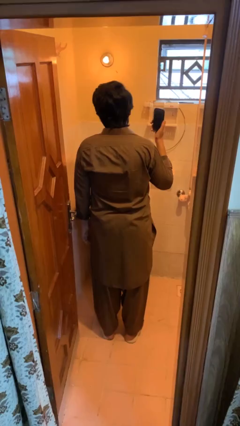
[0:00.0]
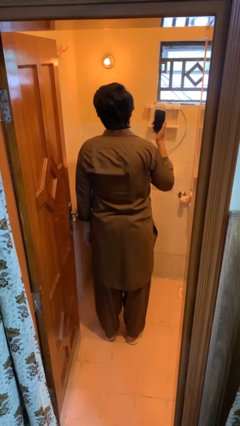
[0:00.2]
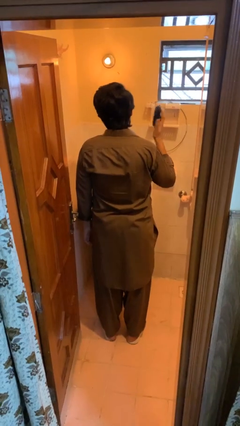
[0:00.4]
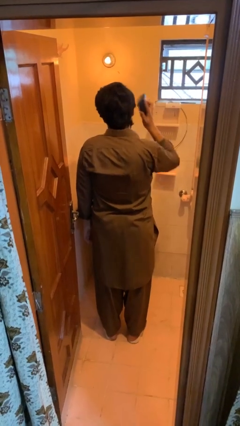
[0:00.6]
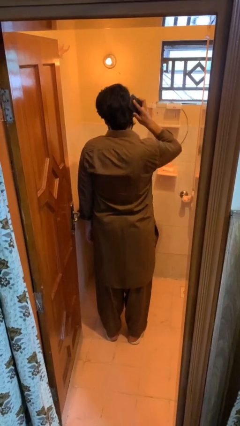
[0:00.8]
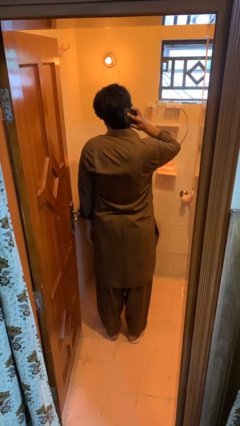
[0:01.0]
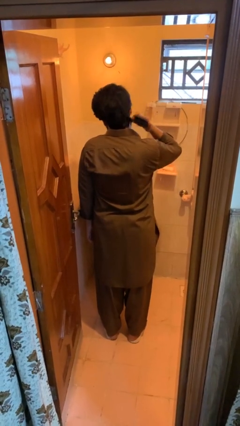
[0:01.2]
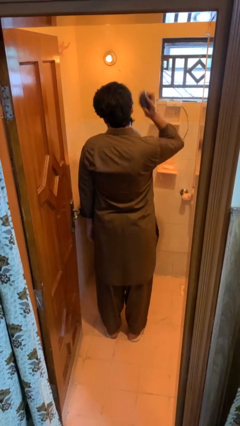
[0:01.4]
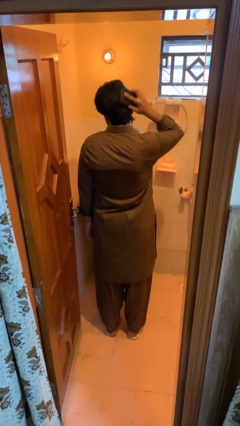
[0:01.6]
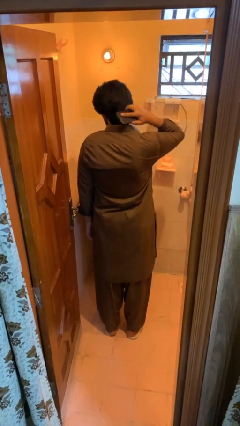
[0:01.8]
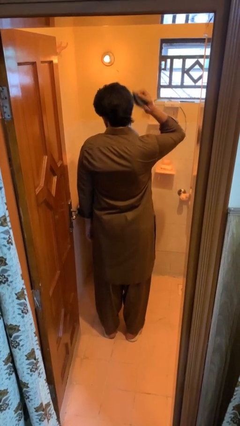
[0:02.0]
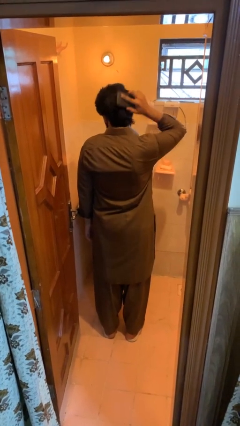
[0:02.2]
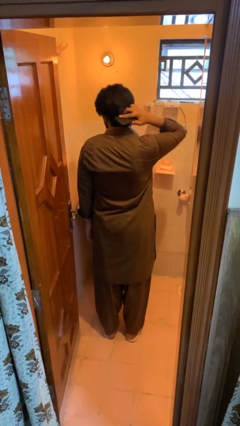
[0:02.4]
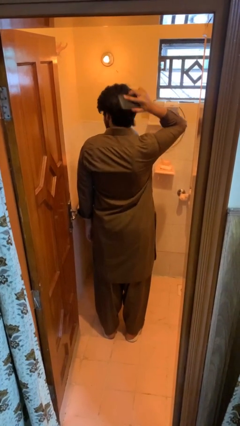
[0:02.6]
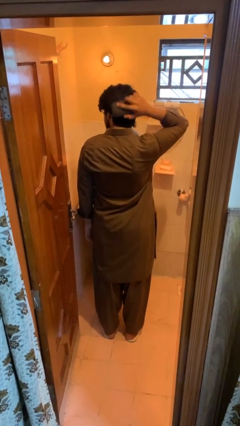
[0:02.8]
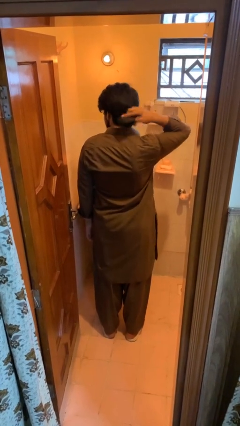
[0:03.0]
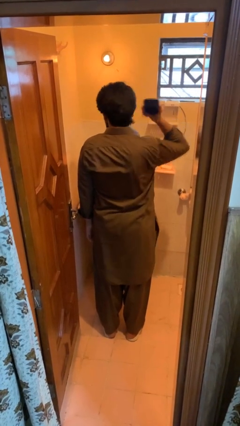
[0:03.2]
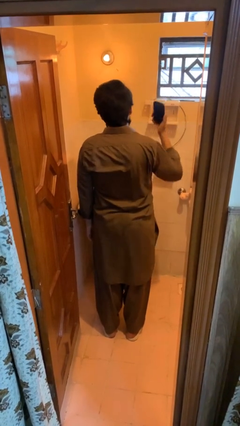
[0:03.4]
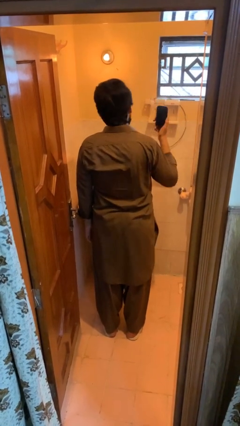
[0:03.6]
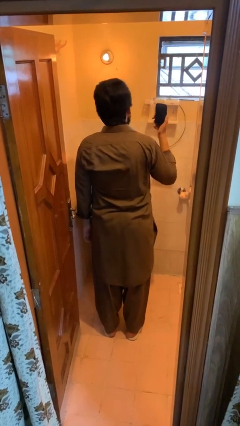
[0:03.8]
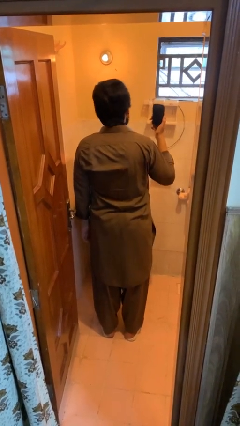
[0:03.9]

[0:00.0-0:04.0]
person brushes hair

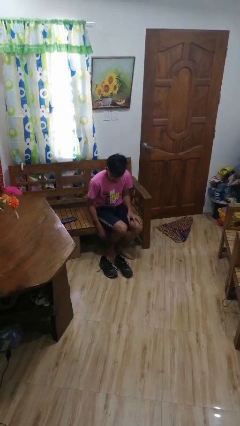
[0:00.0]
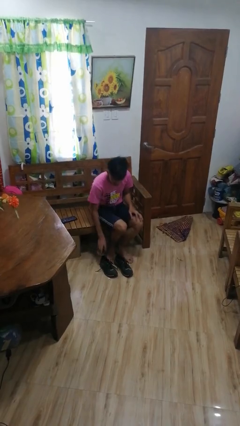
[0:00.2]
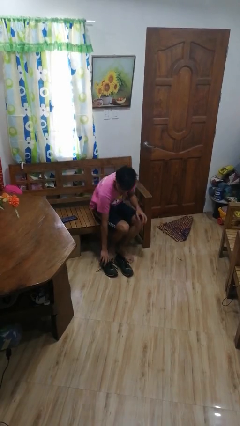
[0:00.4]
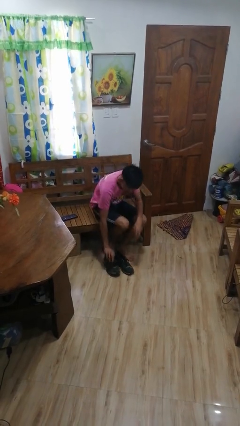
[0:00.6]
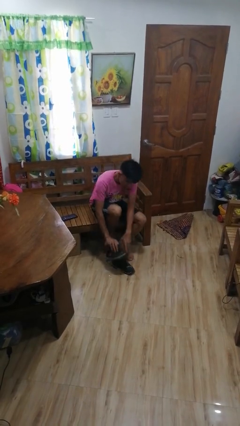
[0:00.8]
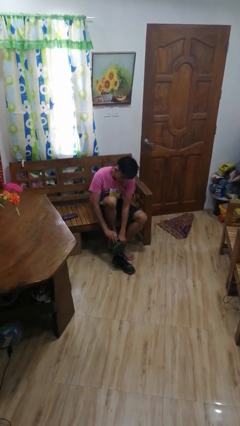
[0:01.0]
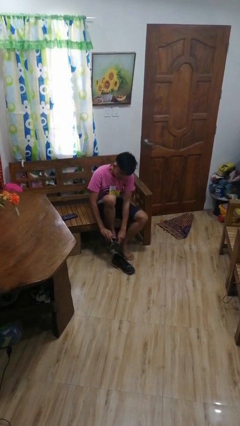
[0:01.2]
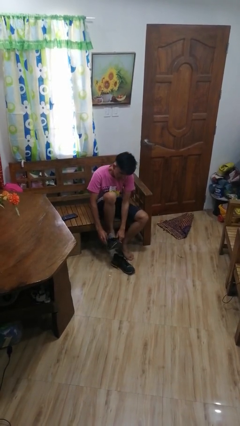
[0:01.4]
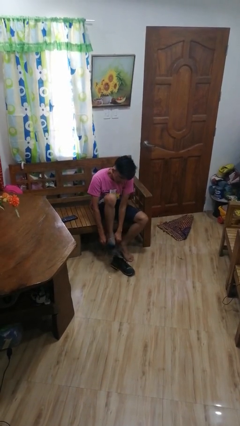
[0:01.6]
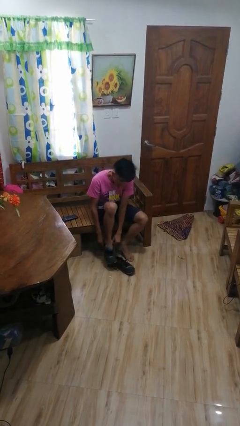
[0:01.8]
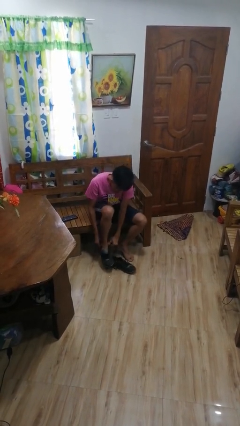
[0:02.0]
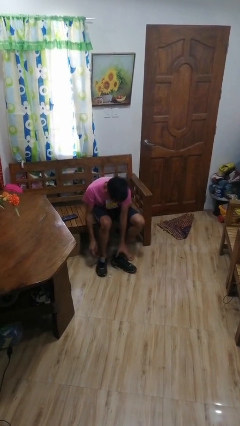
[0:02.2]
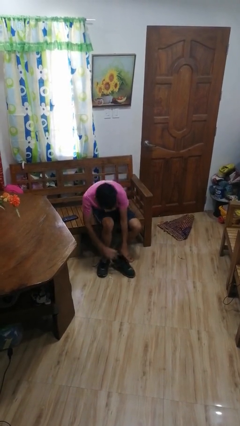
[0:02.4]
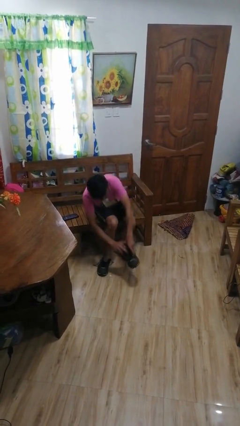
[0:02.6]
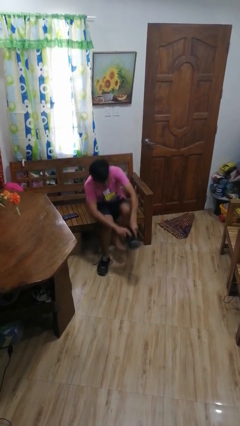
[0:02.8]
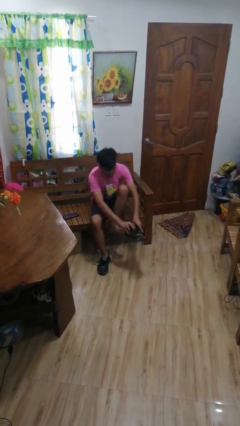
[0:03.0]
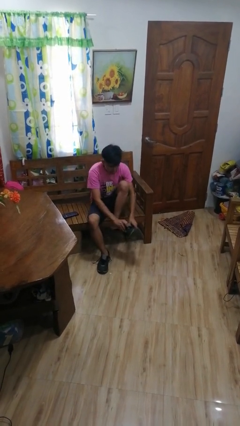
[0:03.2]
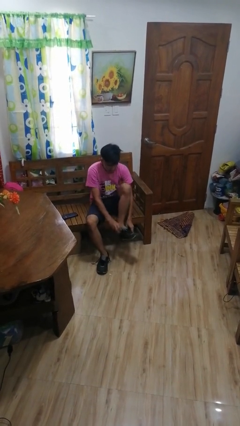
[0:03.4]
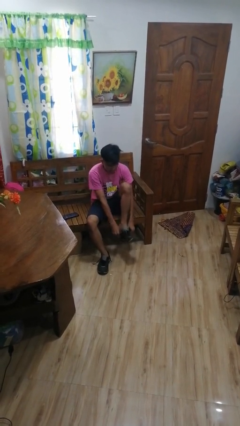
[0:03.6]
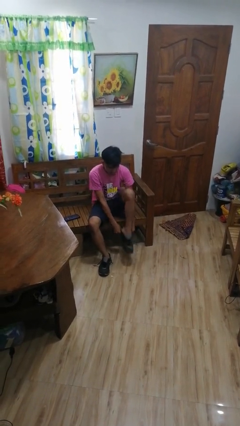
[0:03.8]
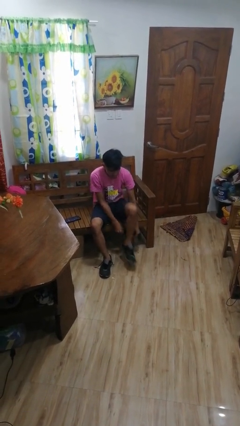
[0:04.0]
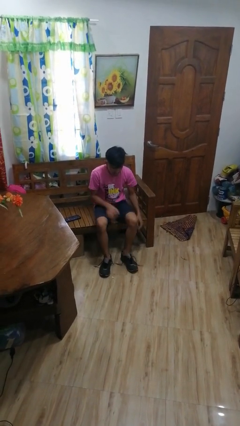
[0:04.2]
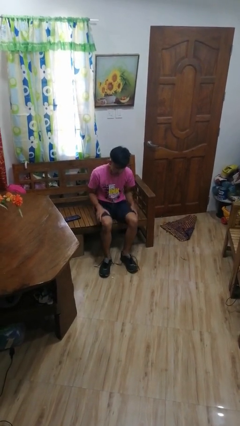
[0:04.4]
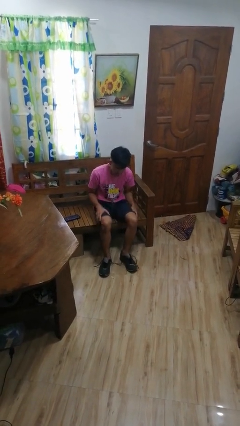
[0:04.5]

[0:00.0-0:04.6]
person puts on shoes

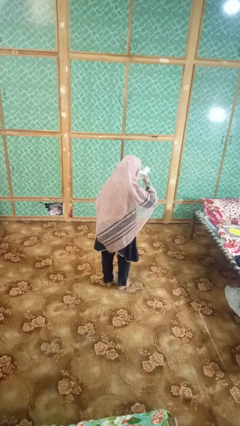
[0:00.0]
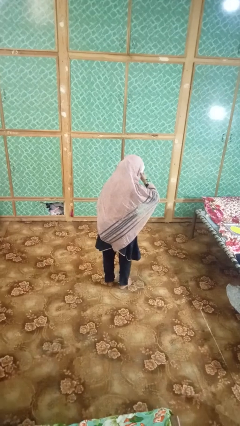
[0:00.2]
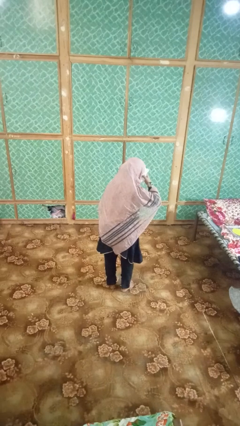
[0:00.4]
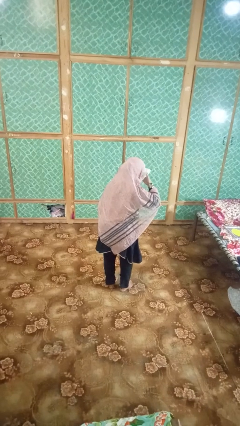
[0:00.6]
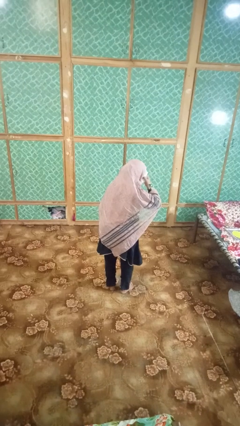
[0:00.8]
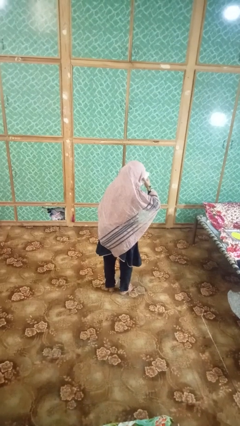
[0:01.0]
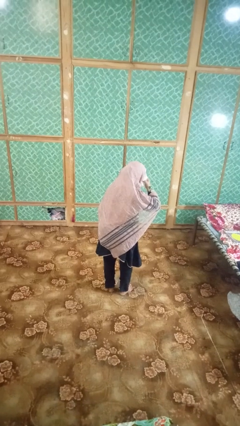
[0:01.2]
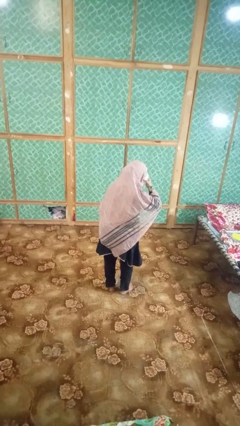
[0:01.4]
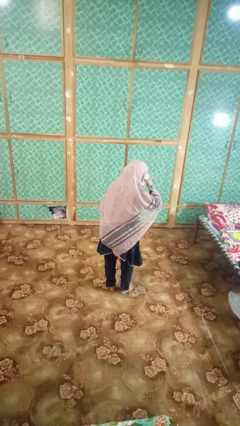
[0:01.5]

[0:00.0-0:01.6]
person blows nose

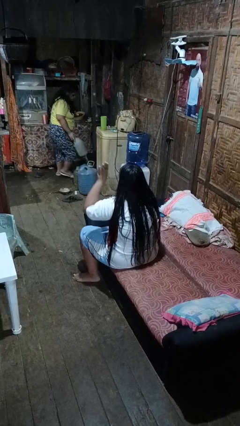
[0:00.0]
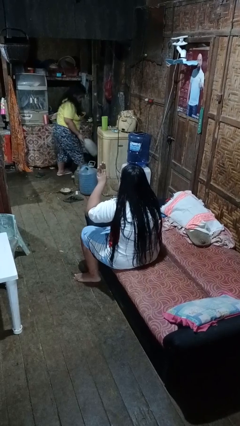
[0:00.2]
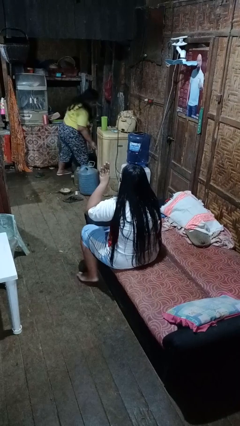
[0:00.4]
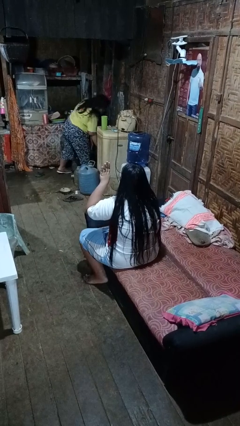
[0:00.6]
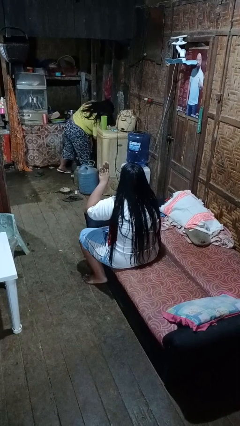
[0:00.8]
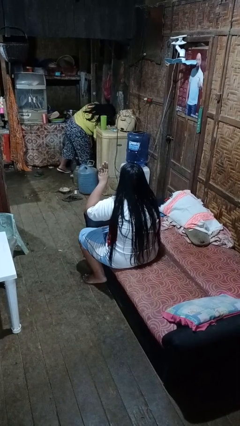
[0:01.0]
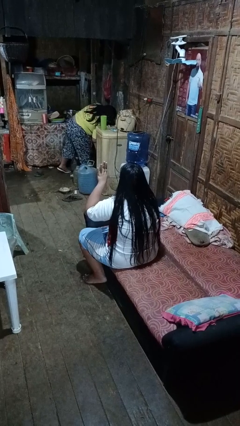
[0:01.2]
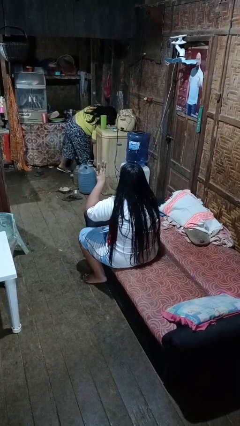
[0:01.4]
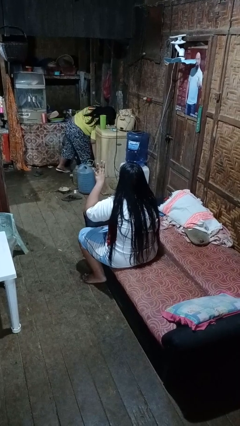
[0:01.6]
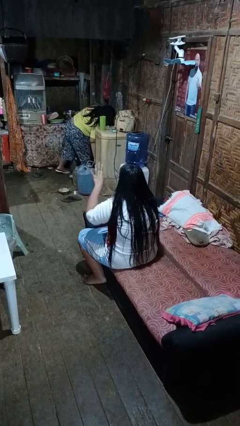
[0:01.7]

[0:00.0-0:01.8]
person gestures number four

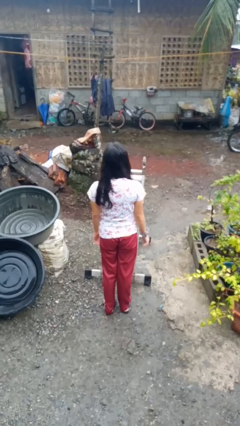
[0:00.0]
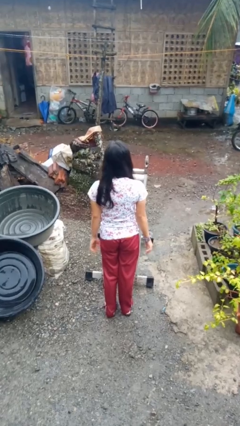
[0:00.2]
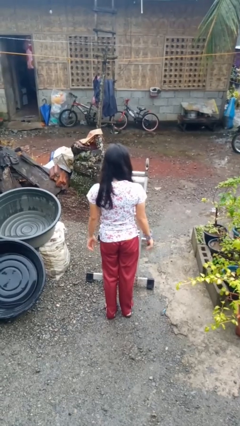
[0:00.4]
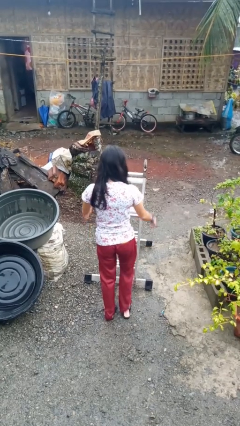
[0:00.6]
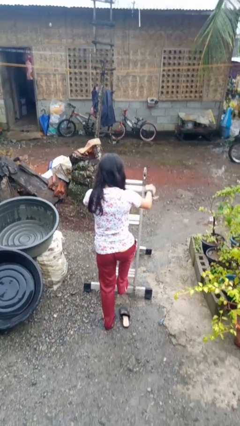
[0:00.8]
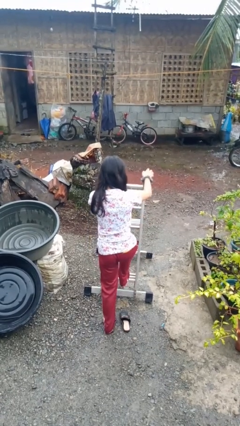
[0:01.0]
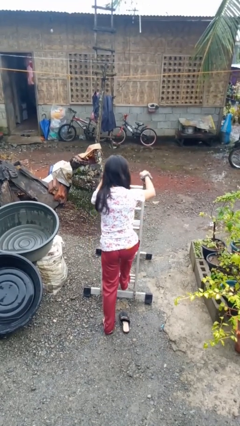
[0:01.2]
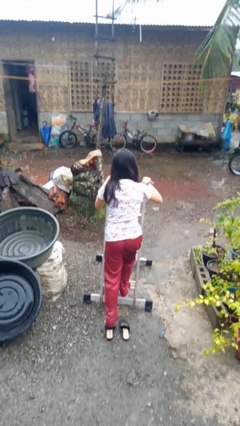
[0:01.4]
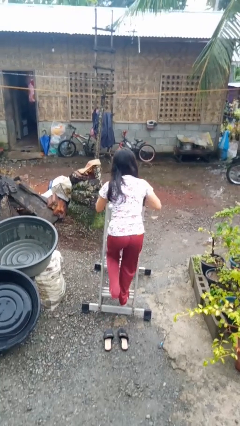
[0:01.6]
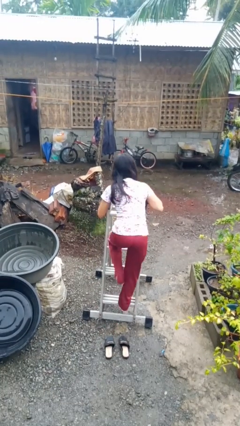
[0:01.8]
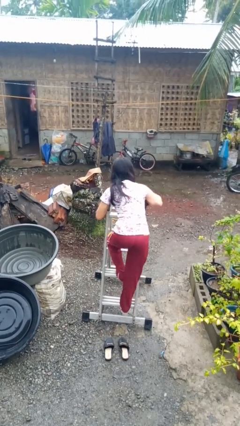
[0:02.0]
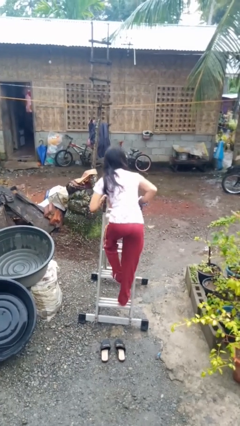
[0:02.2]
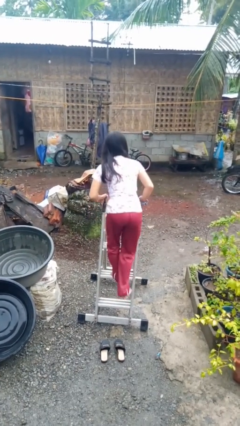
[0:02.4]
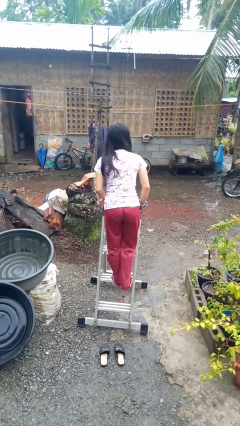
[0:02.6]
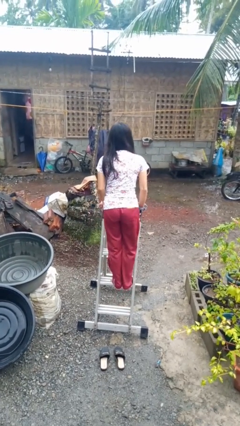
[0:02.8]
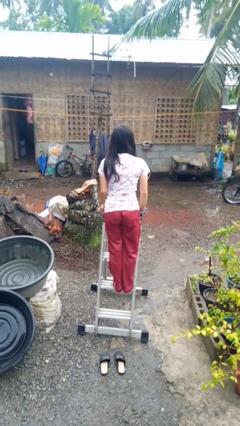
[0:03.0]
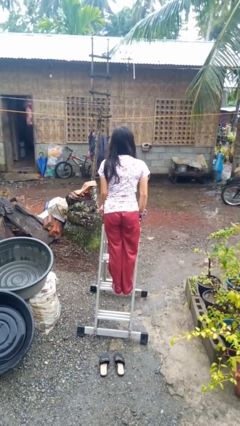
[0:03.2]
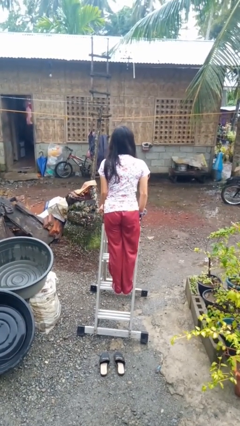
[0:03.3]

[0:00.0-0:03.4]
person climbs up ladder

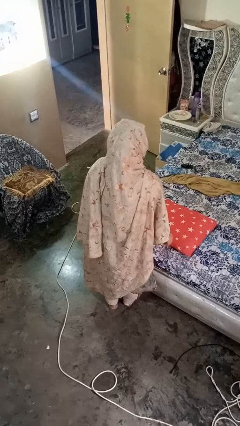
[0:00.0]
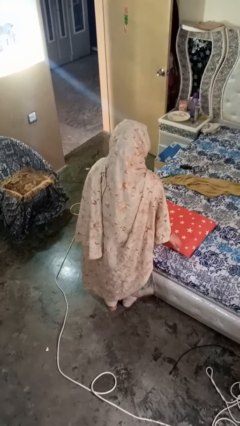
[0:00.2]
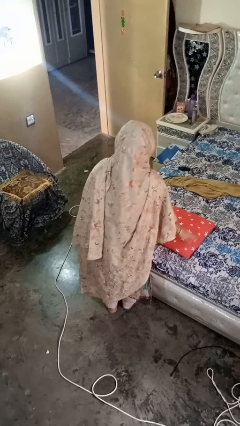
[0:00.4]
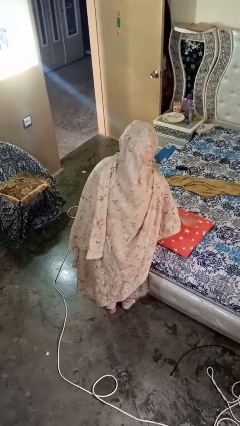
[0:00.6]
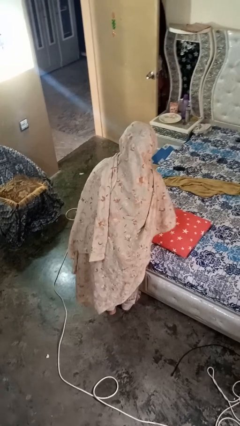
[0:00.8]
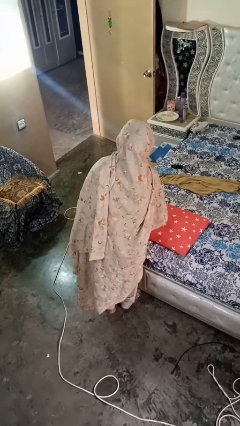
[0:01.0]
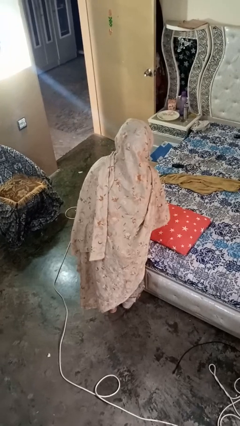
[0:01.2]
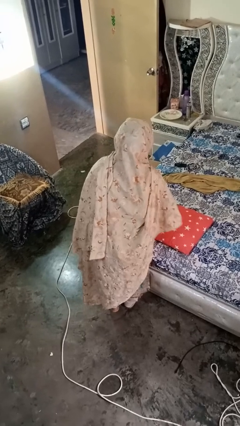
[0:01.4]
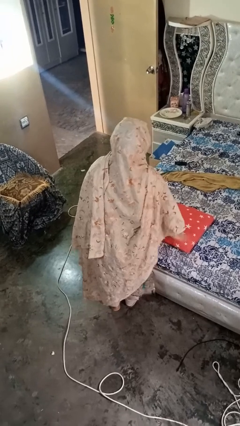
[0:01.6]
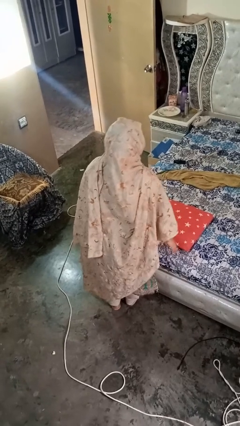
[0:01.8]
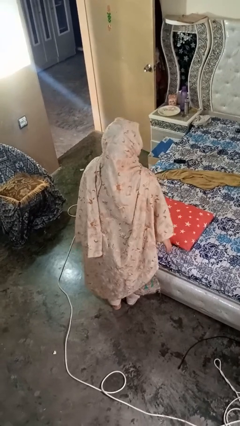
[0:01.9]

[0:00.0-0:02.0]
person waves hand over object
